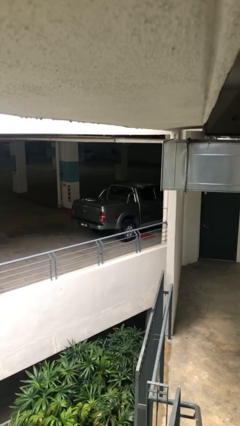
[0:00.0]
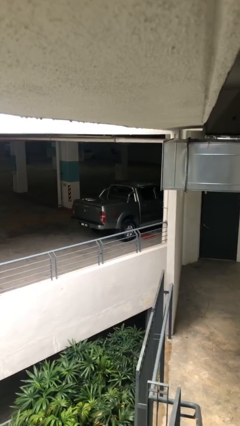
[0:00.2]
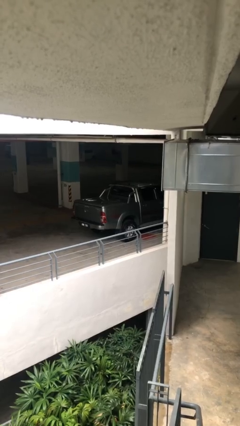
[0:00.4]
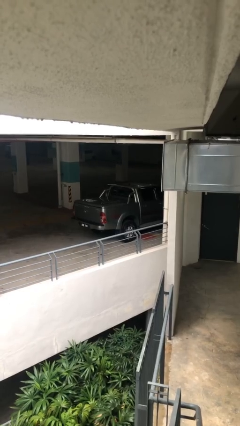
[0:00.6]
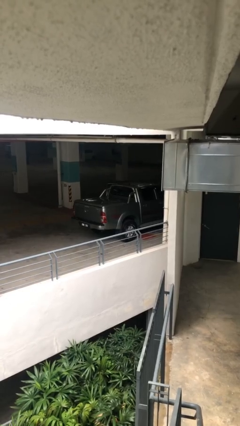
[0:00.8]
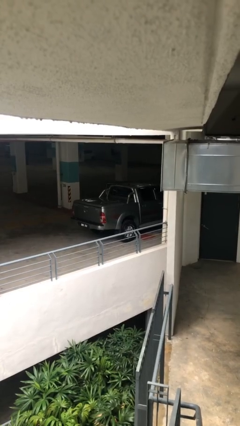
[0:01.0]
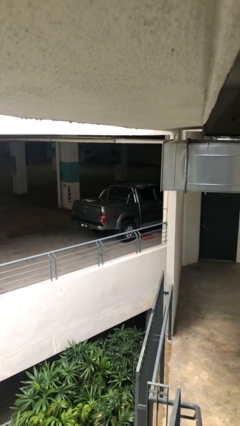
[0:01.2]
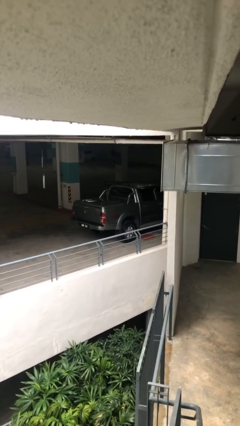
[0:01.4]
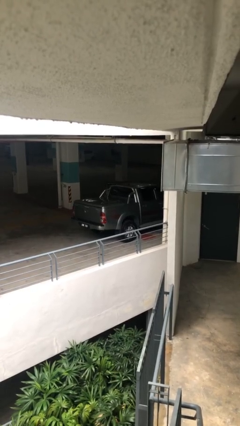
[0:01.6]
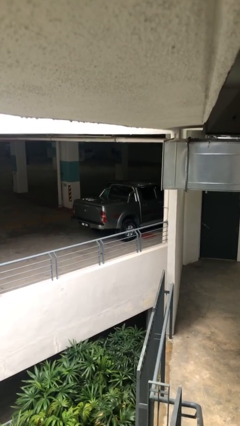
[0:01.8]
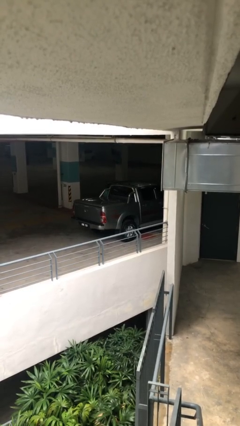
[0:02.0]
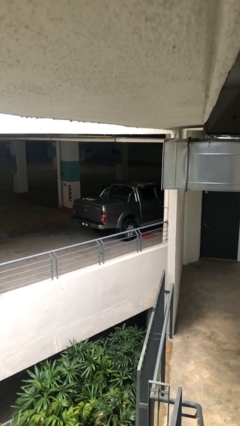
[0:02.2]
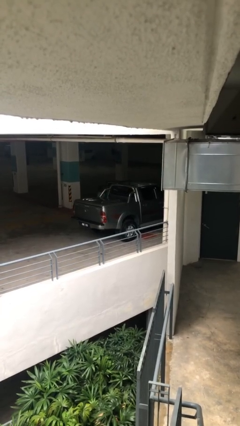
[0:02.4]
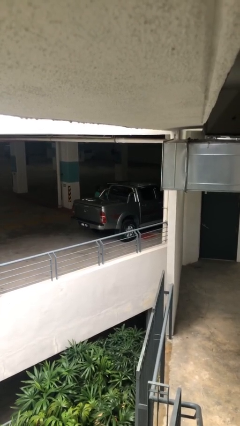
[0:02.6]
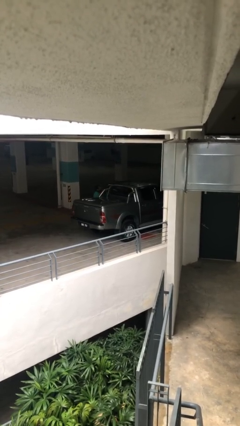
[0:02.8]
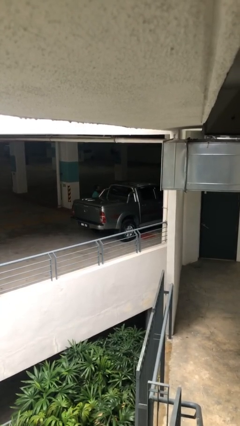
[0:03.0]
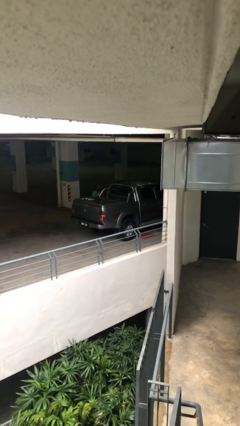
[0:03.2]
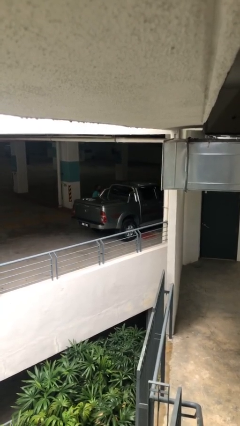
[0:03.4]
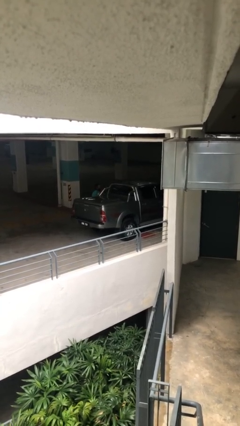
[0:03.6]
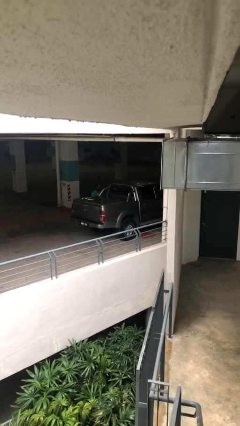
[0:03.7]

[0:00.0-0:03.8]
car drops off person

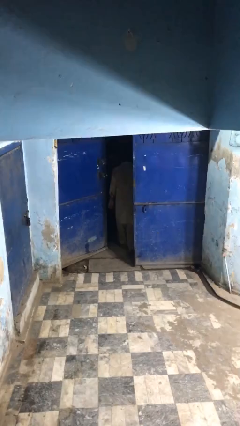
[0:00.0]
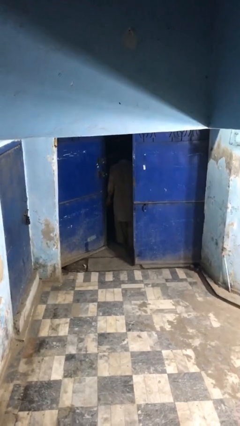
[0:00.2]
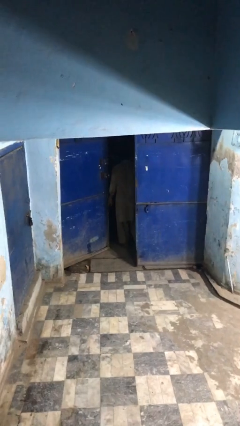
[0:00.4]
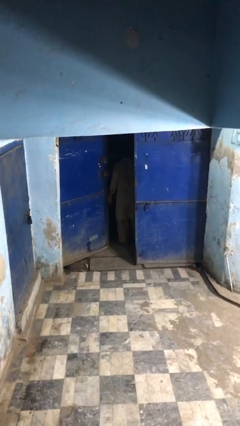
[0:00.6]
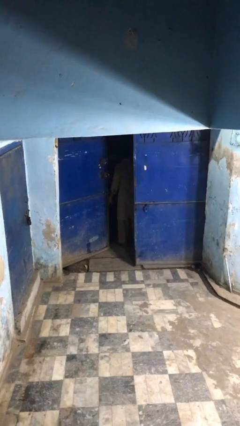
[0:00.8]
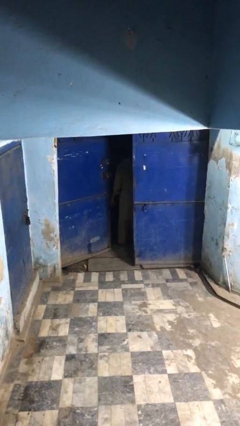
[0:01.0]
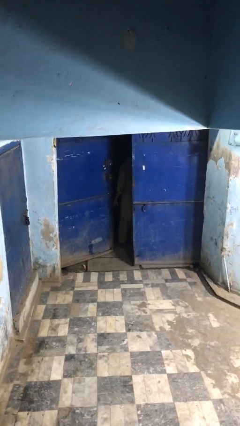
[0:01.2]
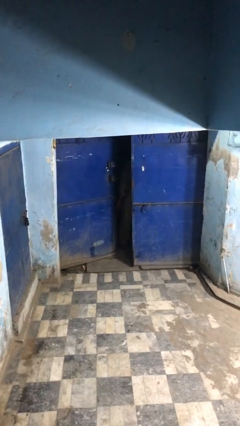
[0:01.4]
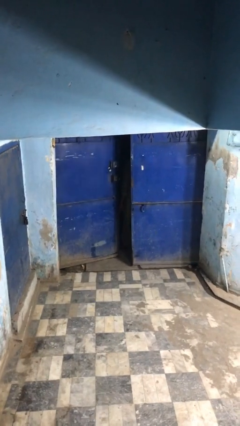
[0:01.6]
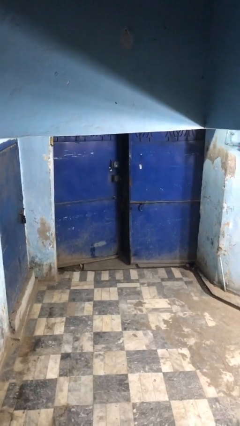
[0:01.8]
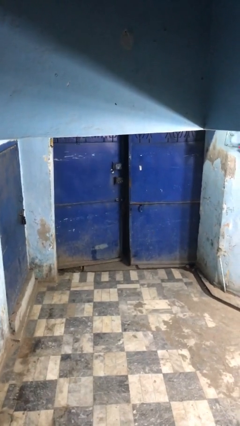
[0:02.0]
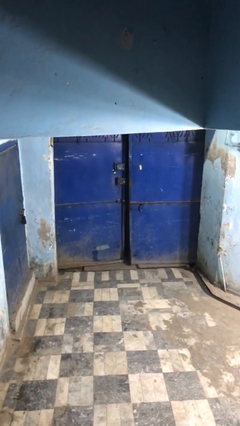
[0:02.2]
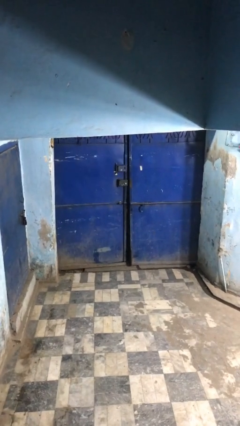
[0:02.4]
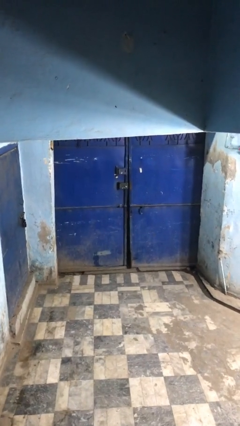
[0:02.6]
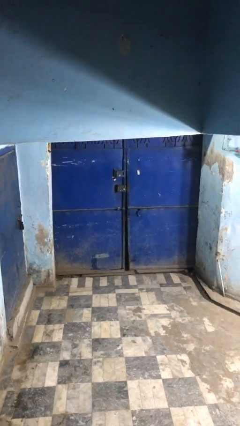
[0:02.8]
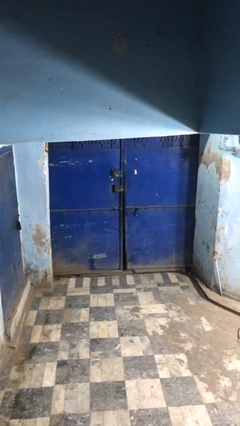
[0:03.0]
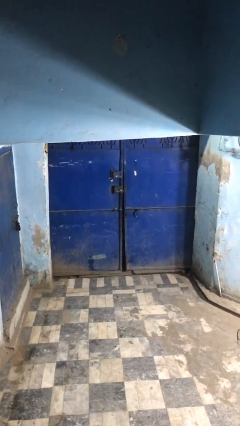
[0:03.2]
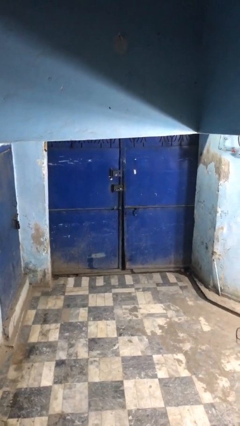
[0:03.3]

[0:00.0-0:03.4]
person closes facility door

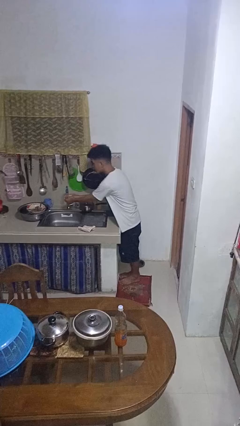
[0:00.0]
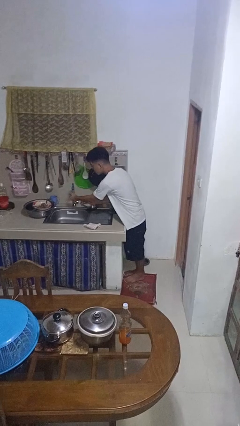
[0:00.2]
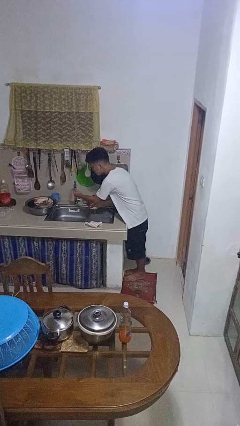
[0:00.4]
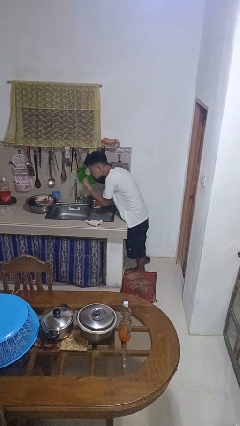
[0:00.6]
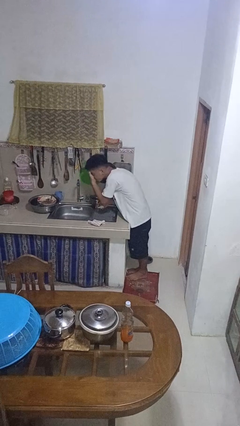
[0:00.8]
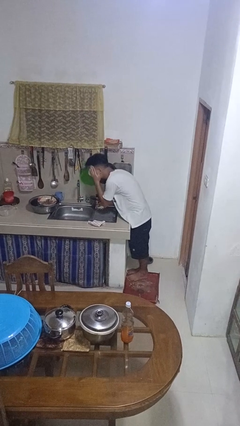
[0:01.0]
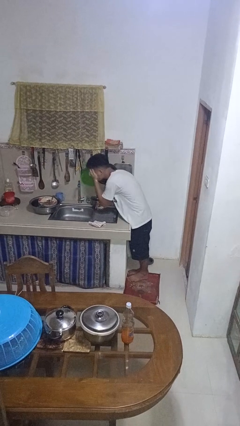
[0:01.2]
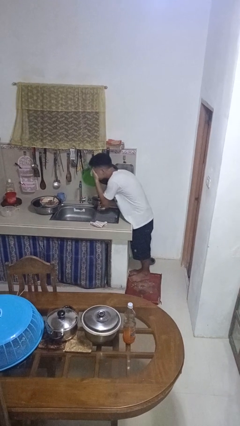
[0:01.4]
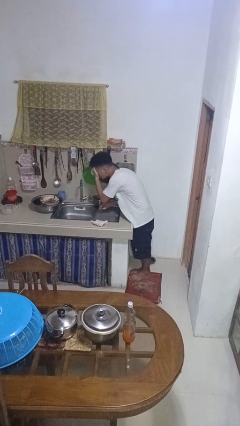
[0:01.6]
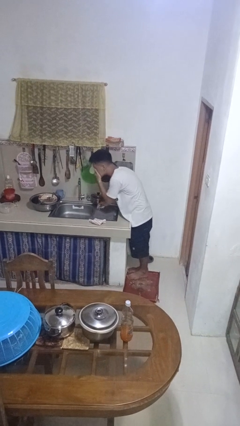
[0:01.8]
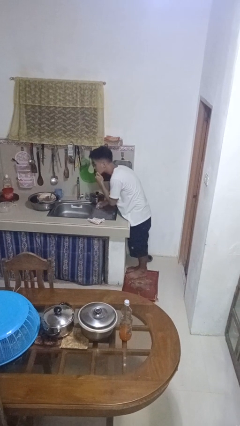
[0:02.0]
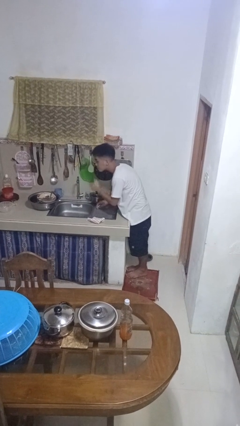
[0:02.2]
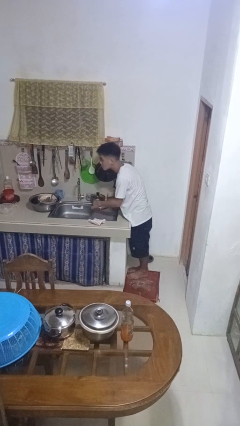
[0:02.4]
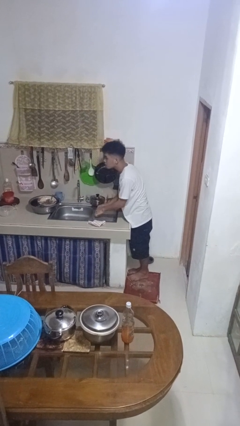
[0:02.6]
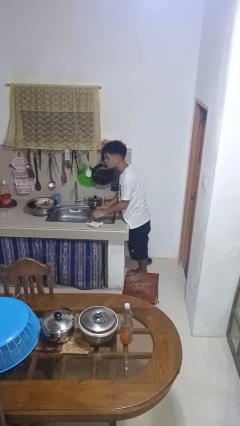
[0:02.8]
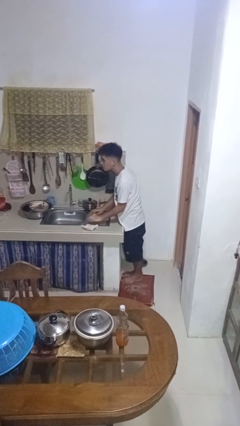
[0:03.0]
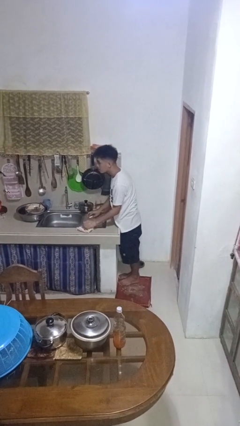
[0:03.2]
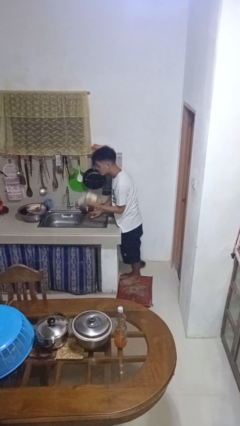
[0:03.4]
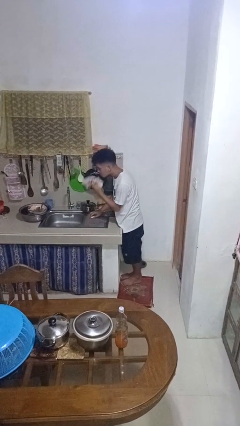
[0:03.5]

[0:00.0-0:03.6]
person washes face

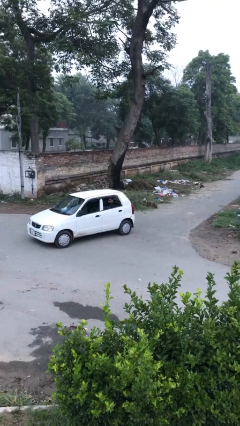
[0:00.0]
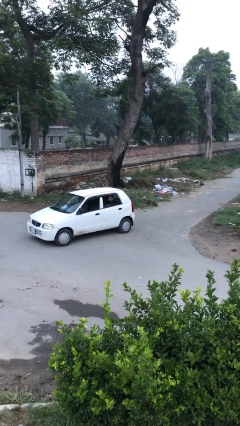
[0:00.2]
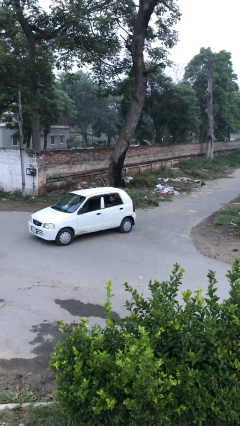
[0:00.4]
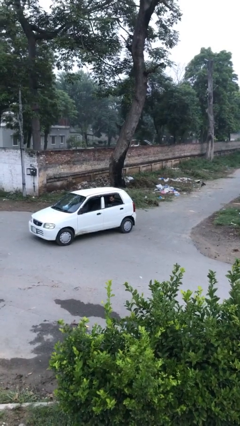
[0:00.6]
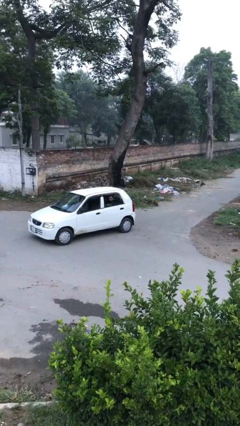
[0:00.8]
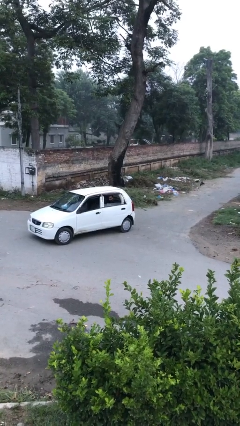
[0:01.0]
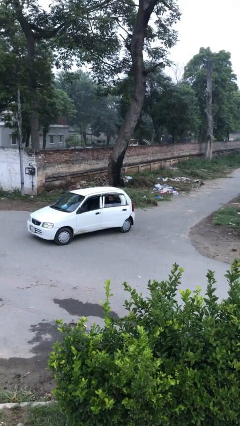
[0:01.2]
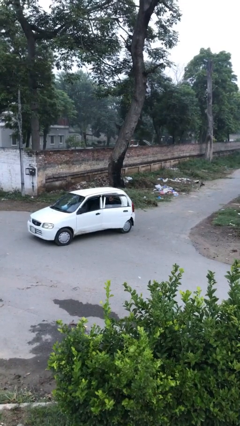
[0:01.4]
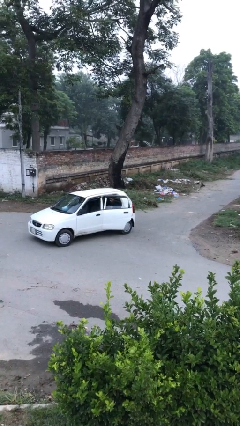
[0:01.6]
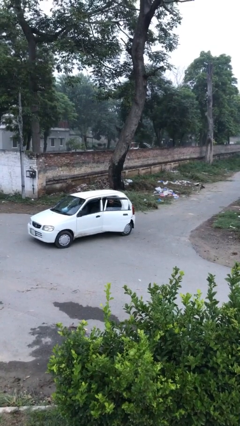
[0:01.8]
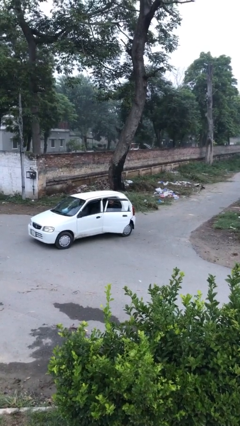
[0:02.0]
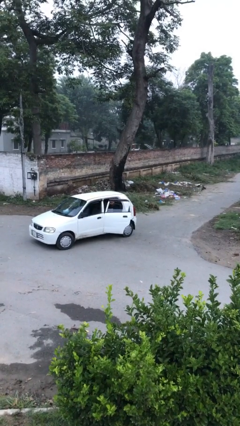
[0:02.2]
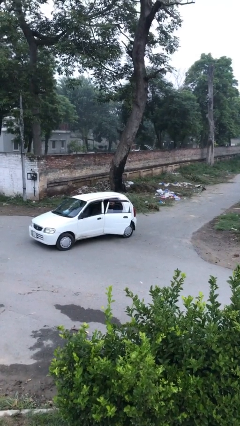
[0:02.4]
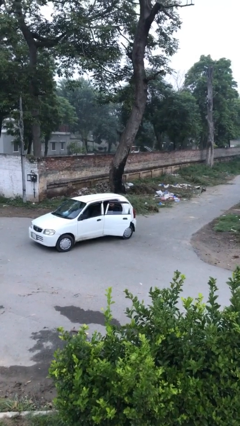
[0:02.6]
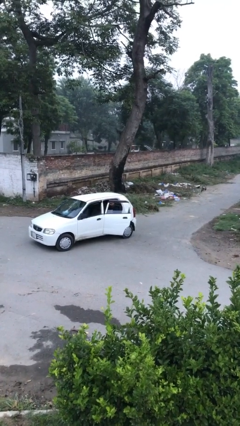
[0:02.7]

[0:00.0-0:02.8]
person opens car door

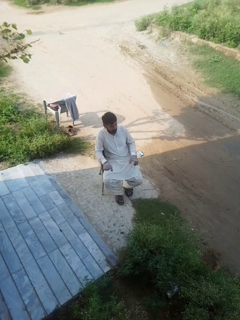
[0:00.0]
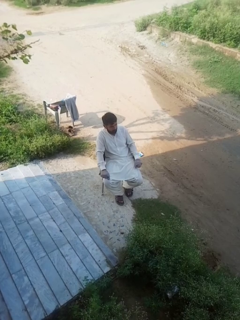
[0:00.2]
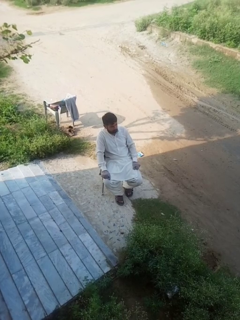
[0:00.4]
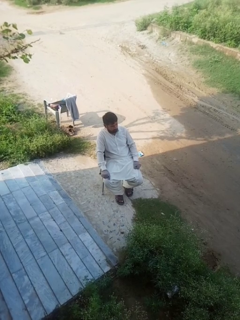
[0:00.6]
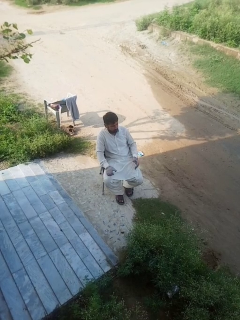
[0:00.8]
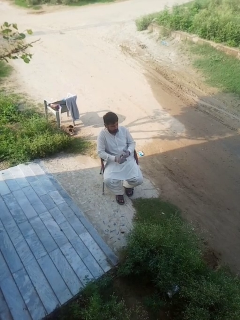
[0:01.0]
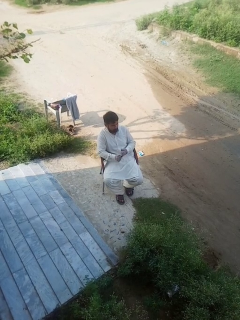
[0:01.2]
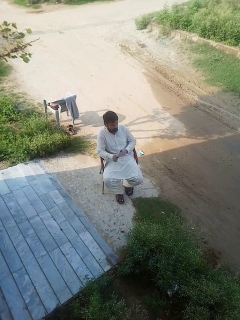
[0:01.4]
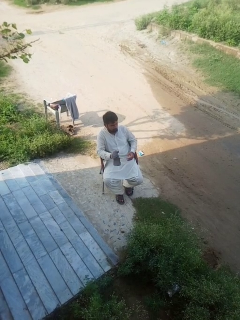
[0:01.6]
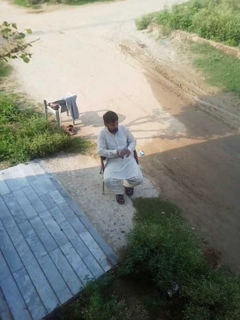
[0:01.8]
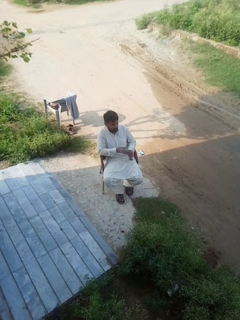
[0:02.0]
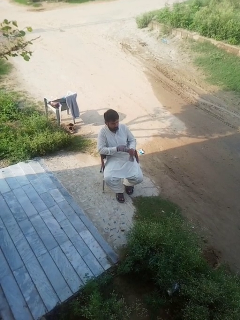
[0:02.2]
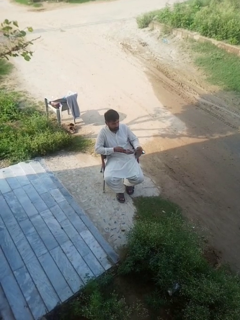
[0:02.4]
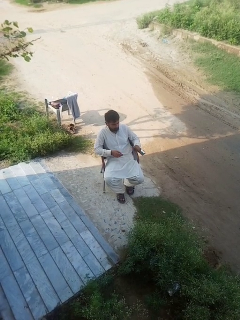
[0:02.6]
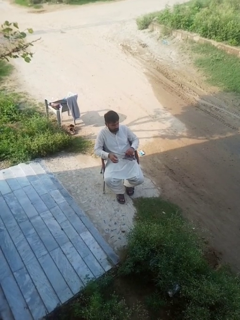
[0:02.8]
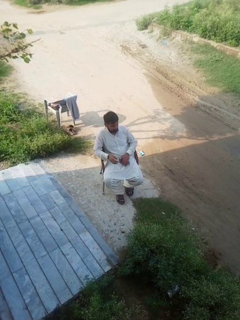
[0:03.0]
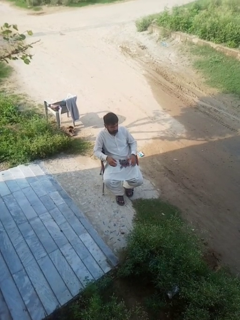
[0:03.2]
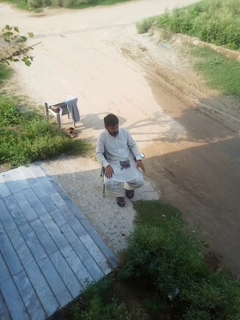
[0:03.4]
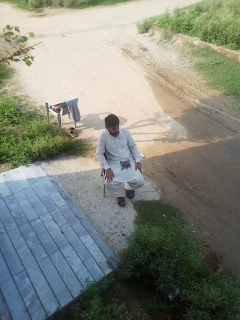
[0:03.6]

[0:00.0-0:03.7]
person takes off gloves

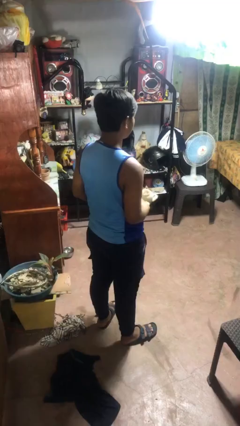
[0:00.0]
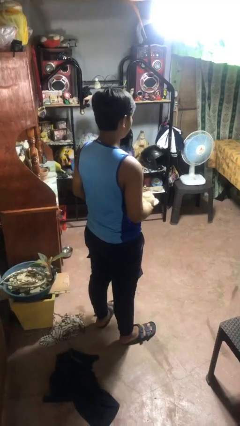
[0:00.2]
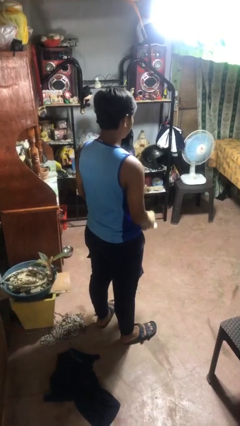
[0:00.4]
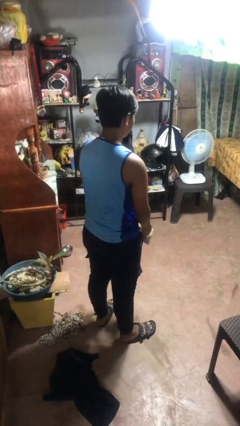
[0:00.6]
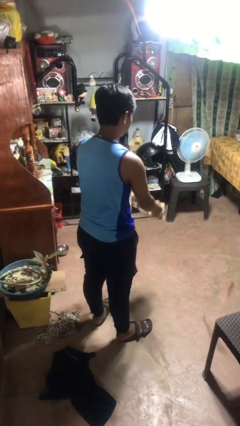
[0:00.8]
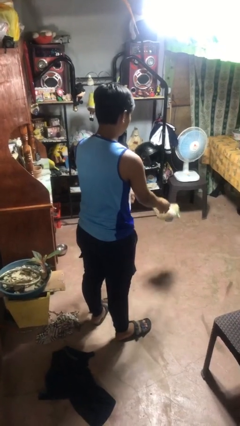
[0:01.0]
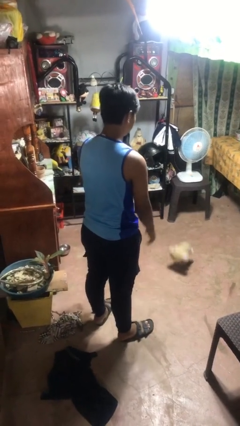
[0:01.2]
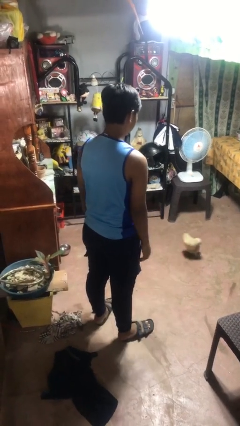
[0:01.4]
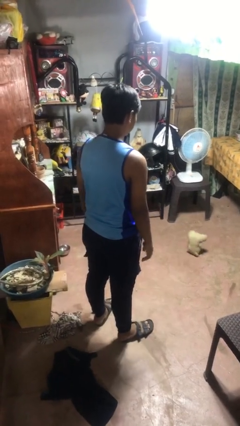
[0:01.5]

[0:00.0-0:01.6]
person throws object to ground
